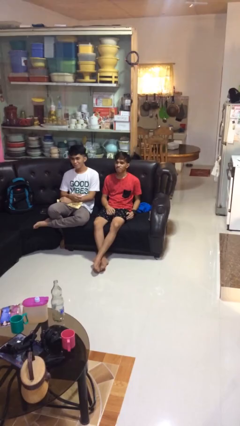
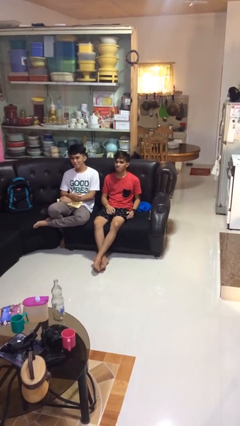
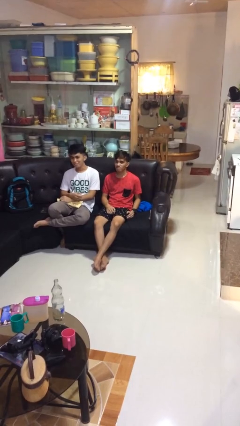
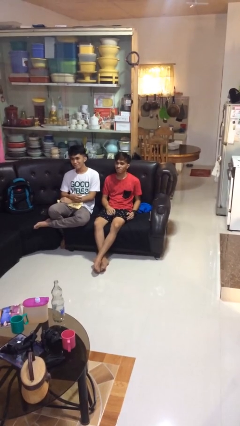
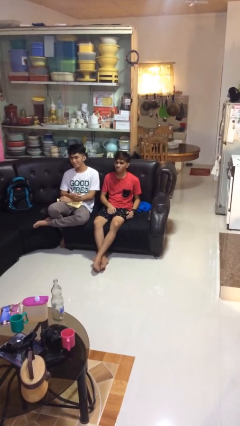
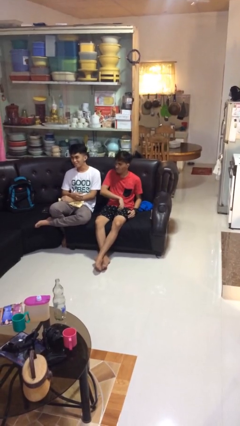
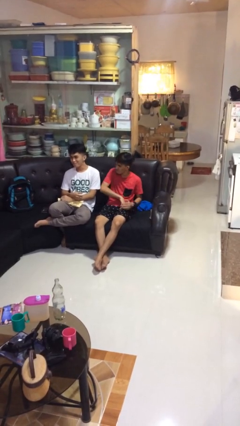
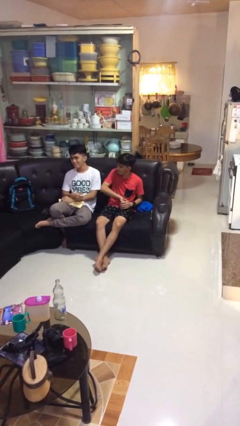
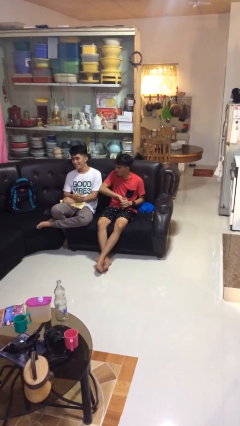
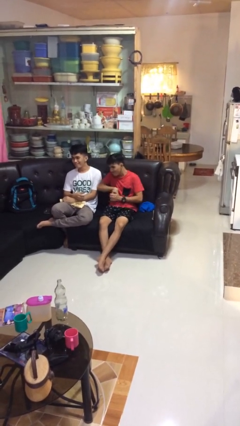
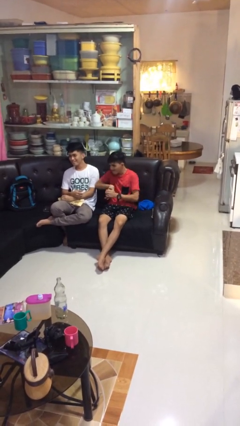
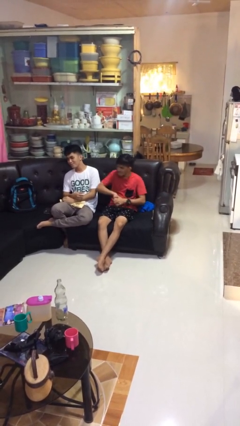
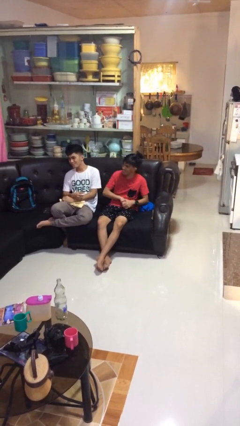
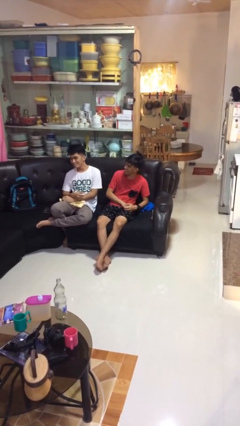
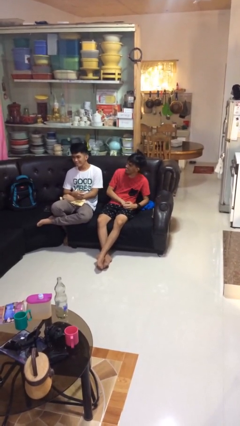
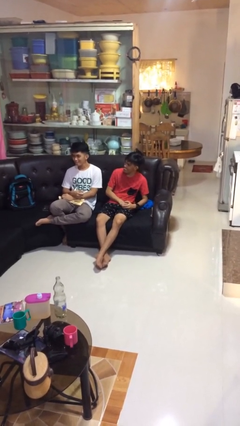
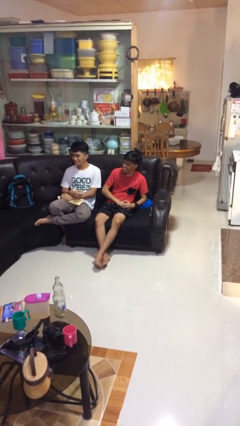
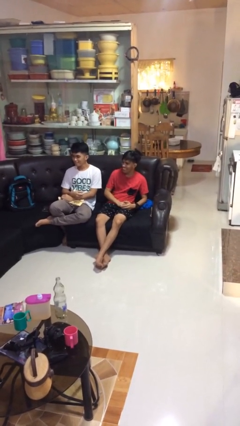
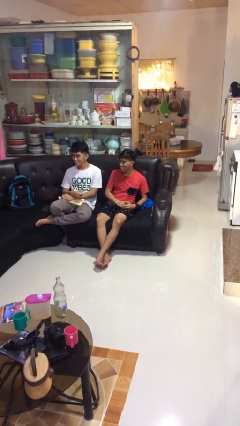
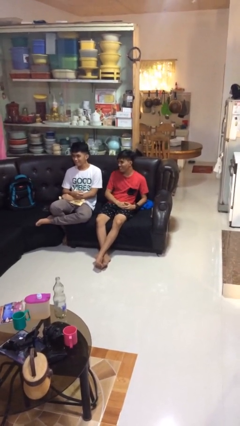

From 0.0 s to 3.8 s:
person nudges person with elbow

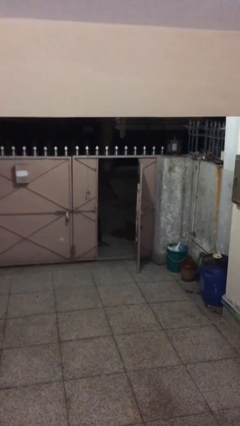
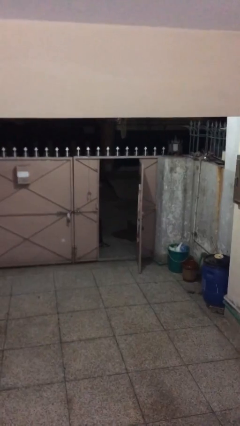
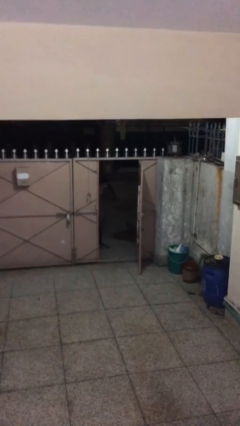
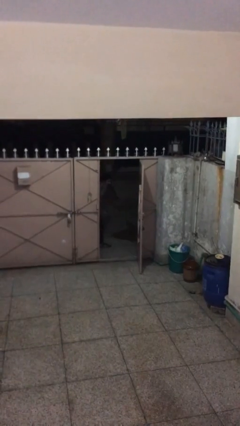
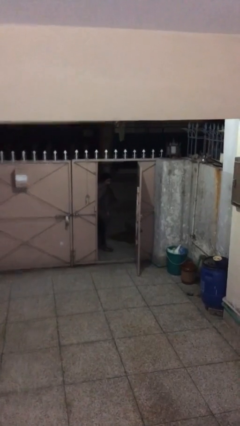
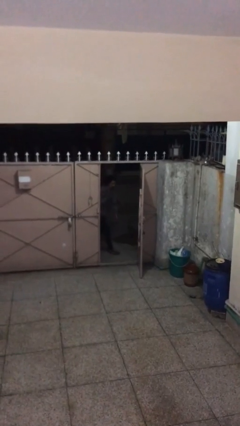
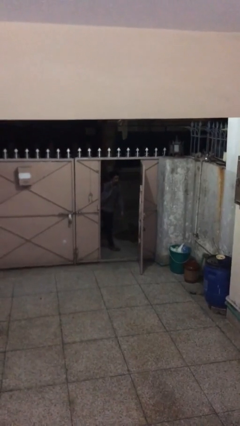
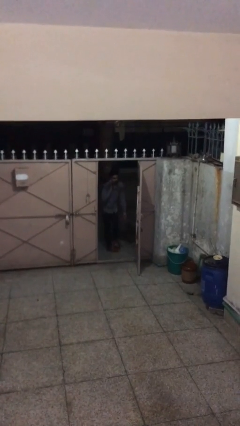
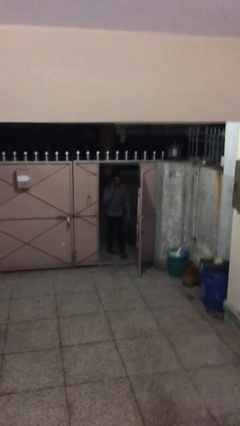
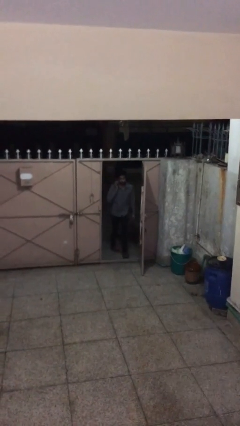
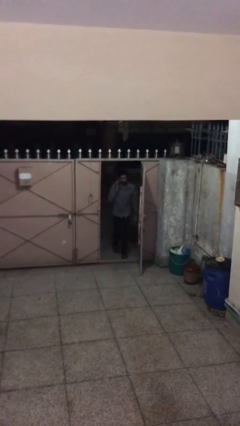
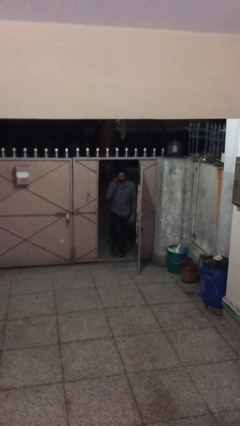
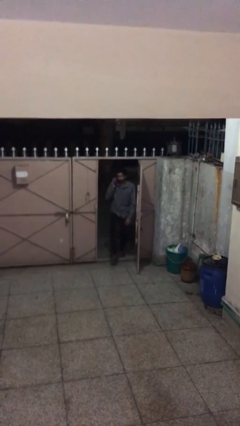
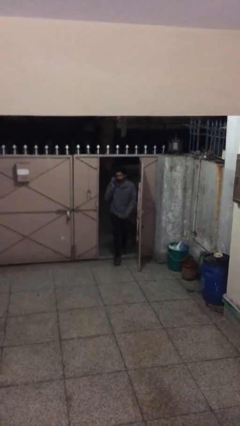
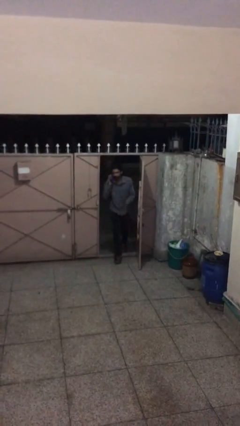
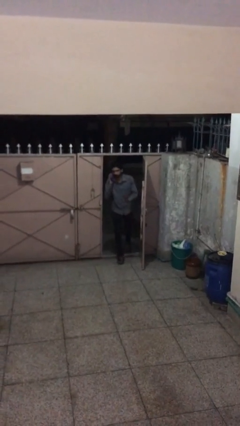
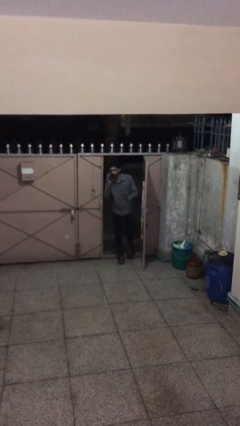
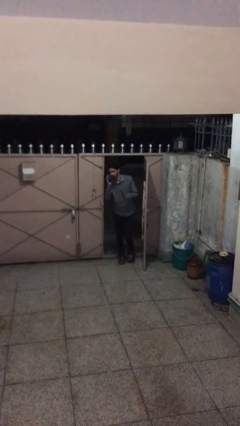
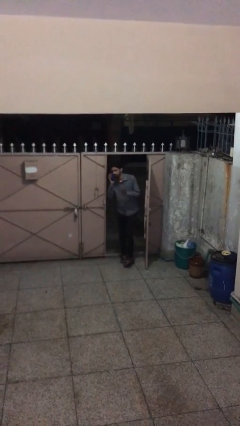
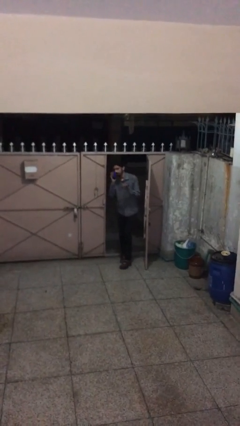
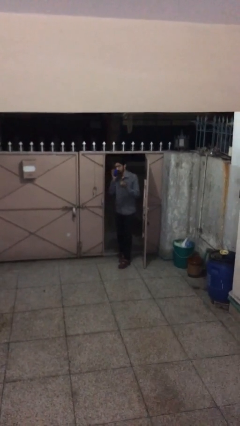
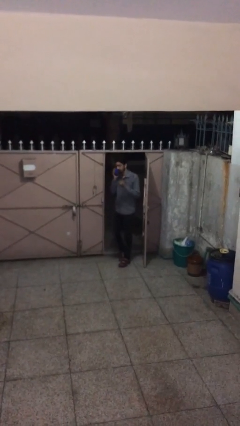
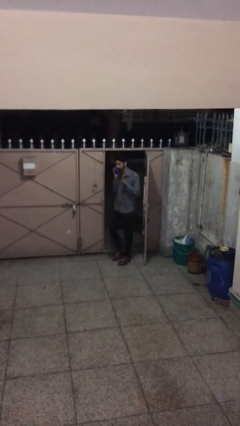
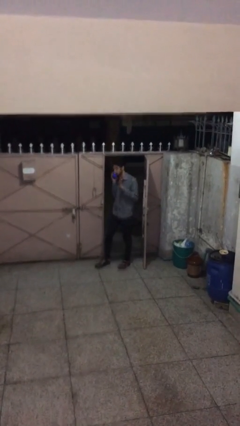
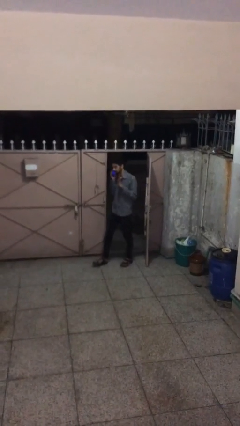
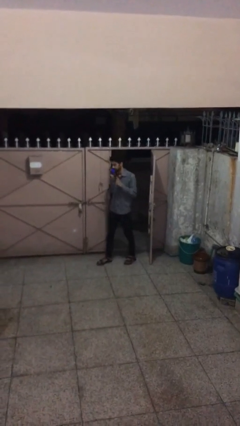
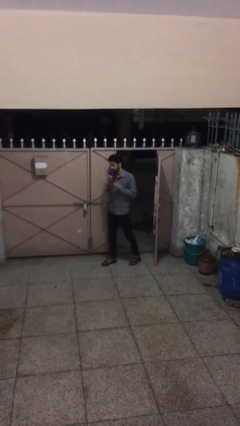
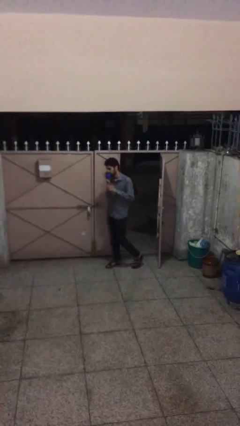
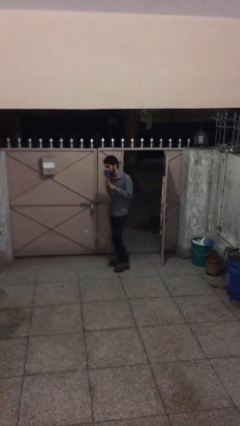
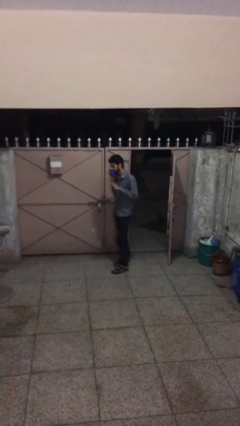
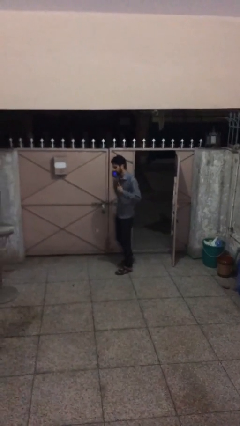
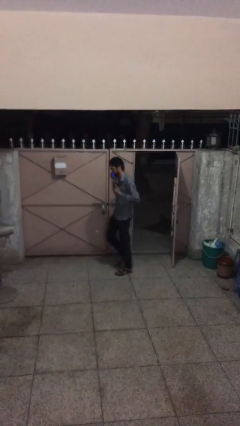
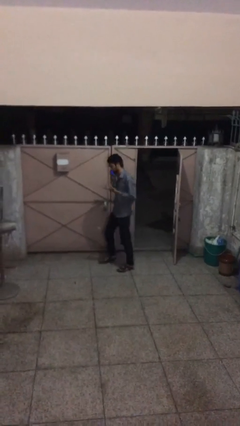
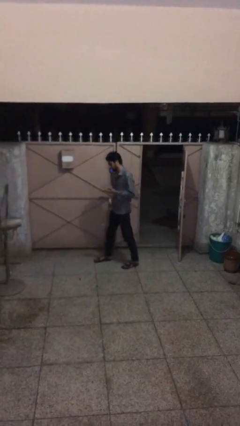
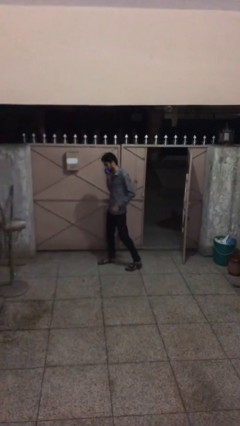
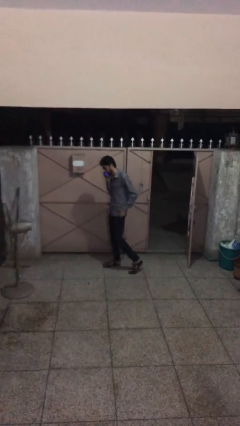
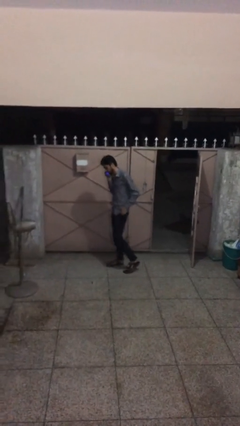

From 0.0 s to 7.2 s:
person enters scene through structure

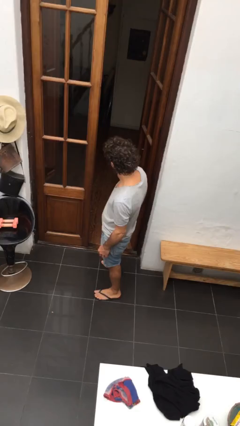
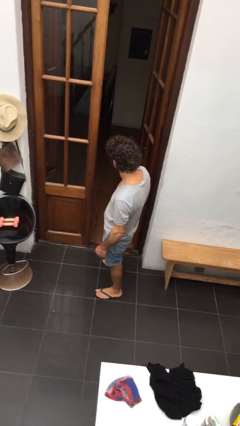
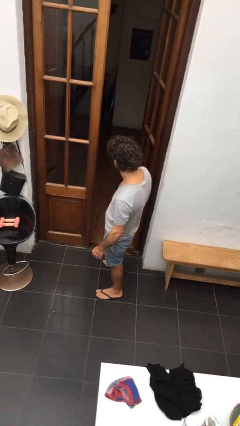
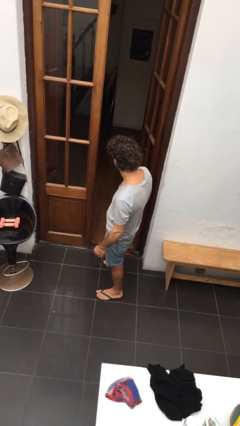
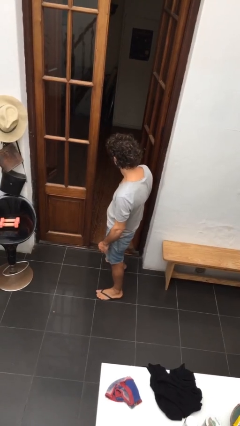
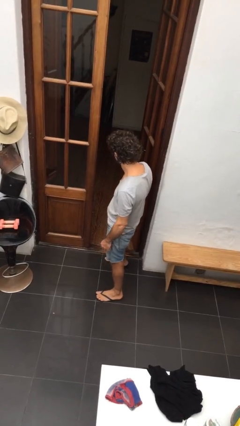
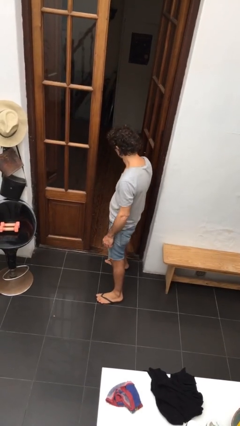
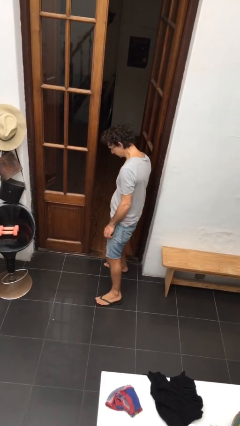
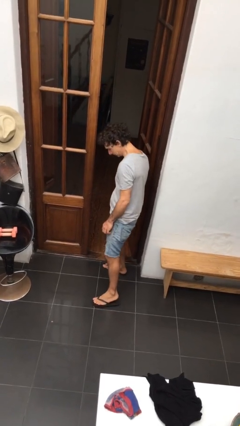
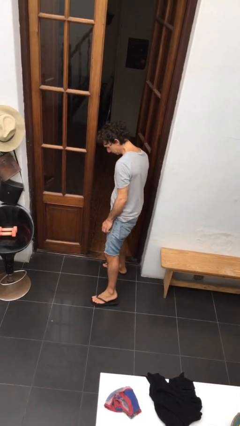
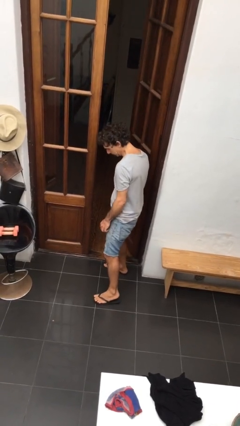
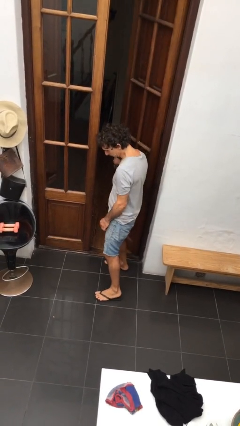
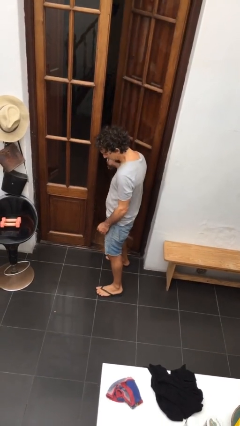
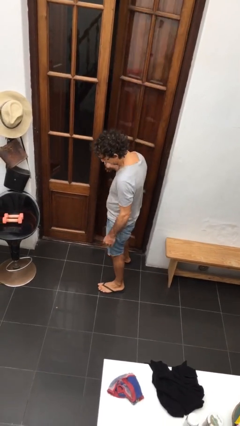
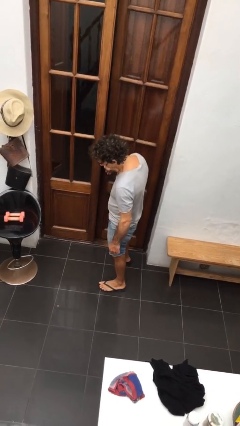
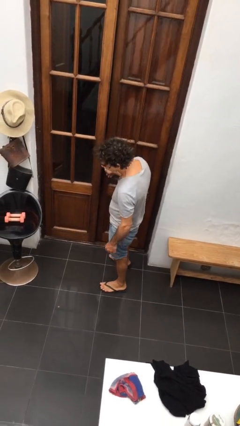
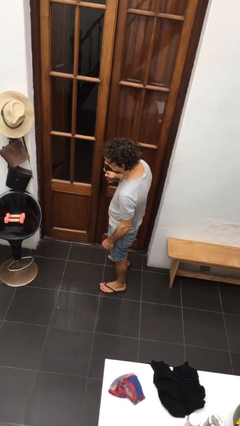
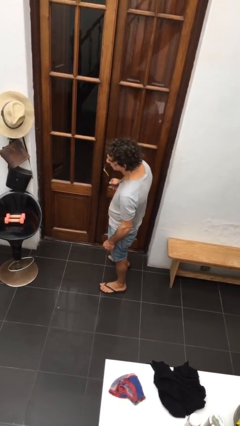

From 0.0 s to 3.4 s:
person closes facility door

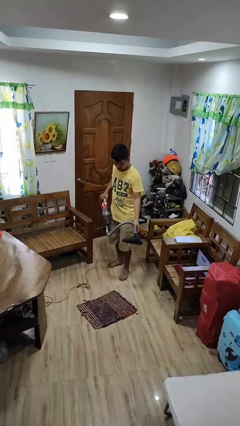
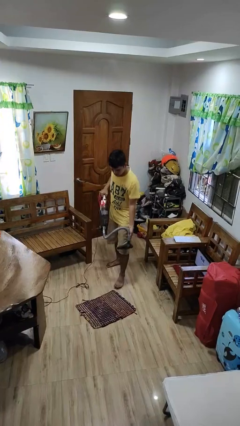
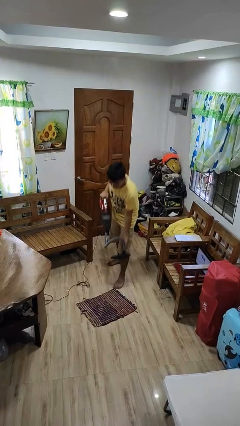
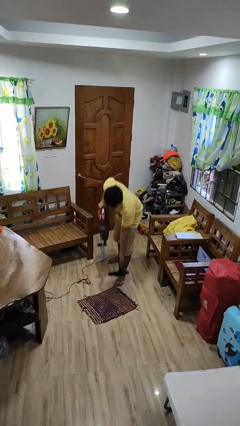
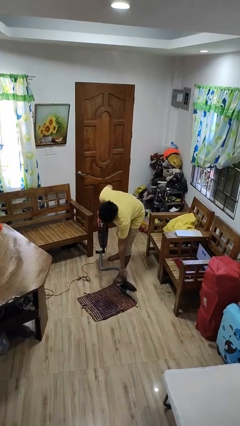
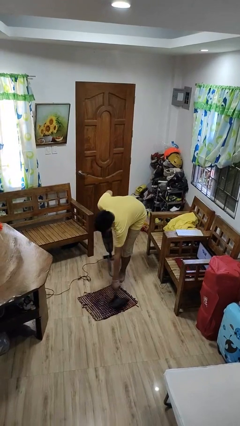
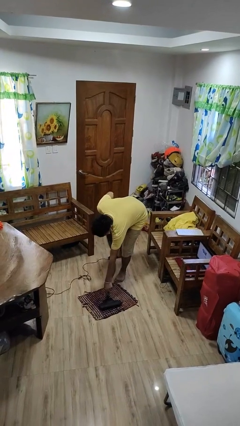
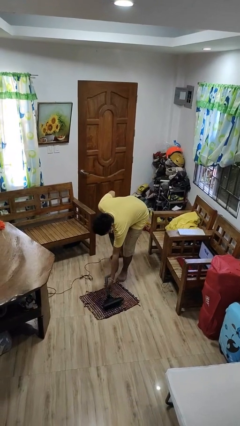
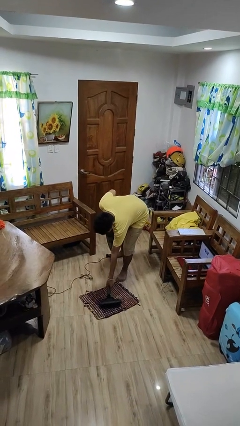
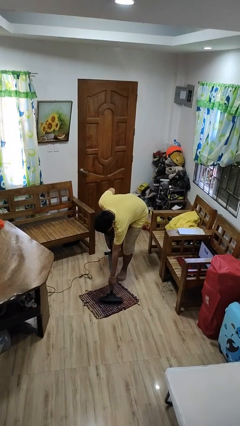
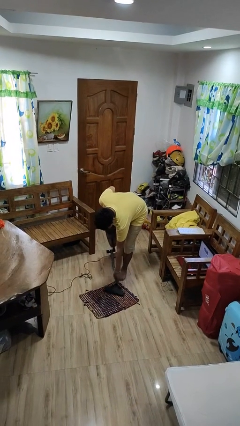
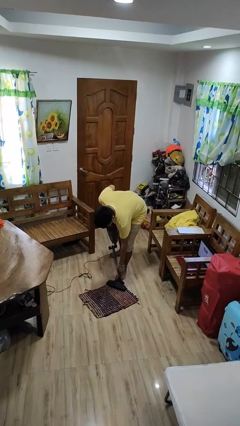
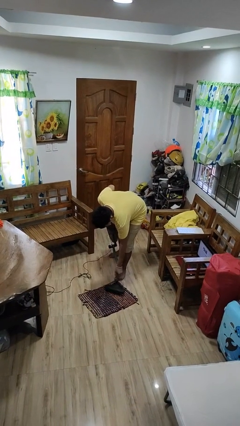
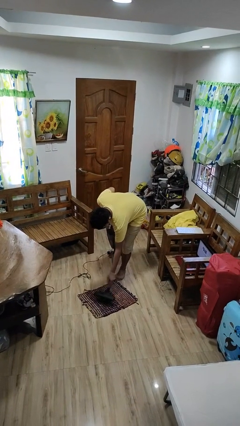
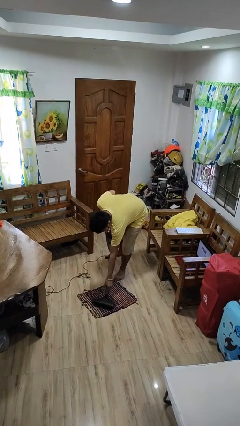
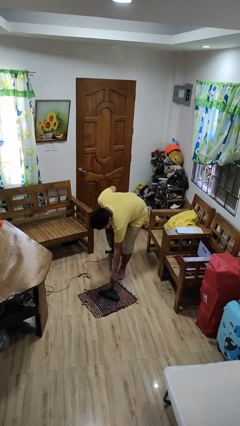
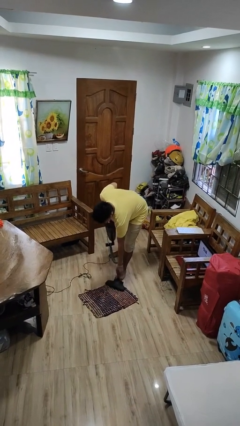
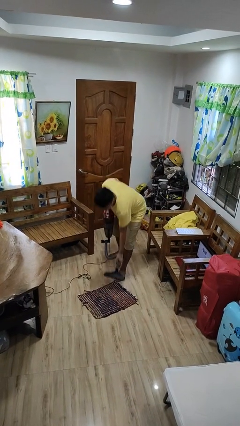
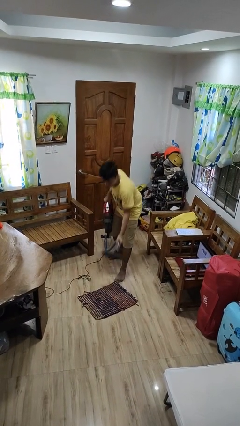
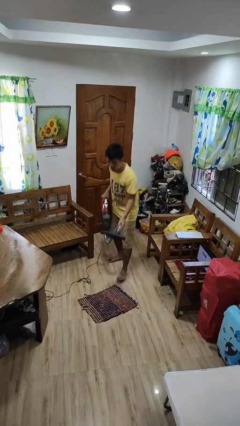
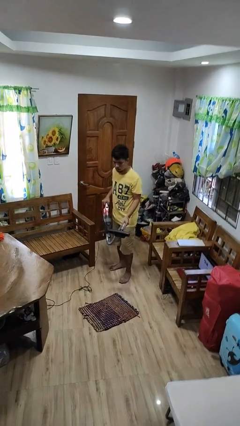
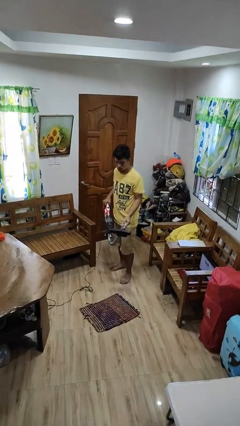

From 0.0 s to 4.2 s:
person vacuums carpet
